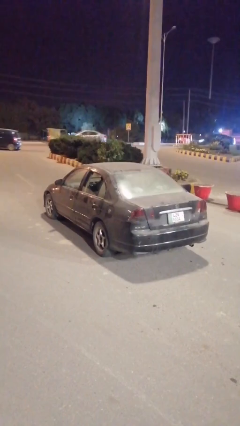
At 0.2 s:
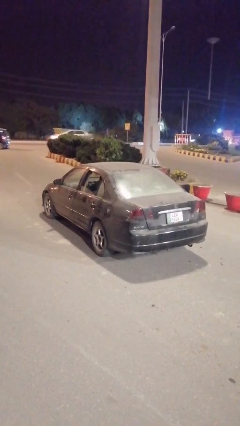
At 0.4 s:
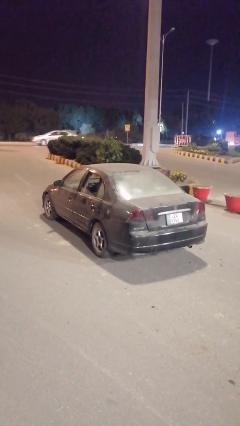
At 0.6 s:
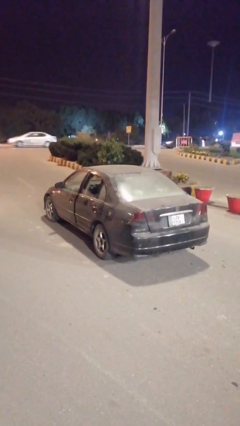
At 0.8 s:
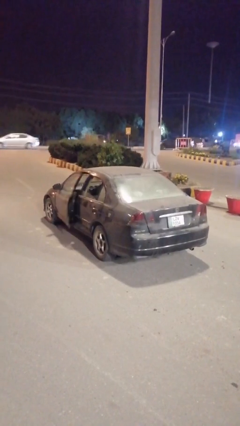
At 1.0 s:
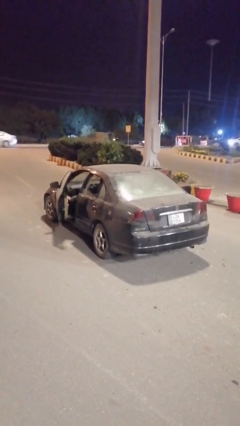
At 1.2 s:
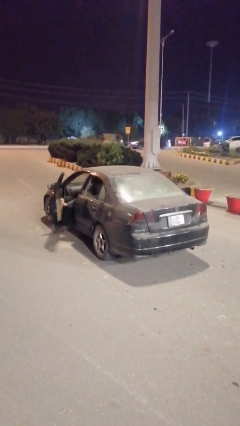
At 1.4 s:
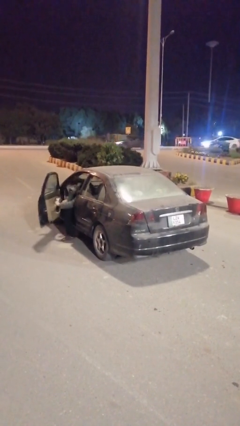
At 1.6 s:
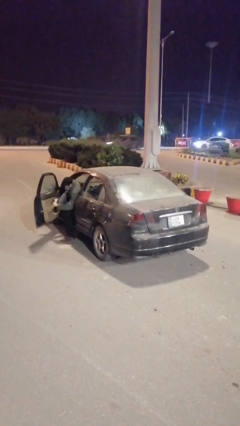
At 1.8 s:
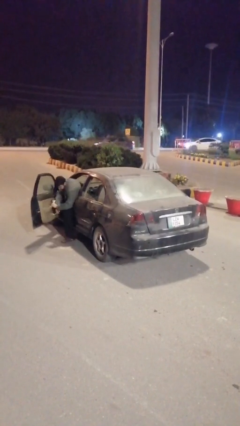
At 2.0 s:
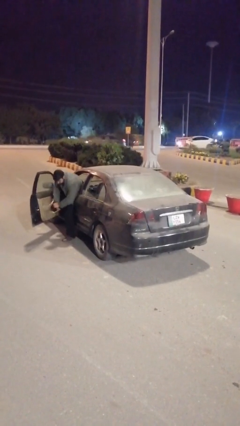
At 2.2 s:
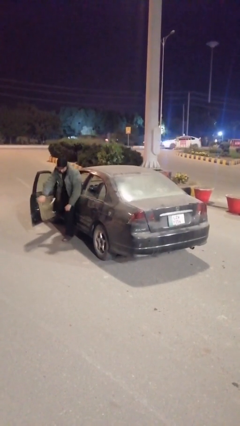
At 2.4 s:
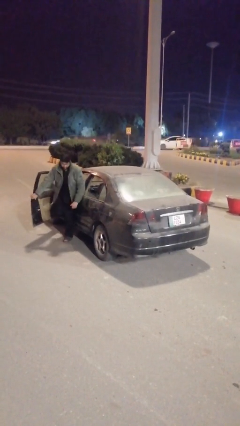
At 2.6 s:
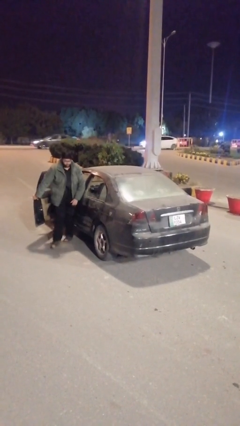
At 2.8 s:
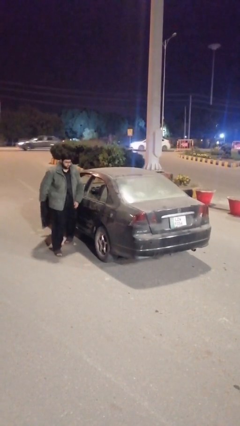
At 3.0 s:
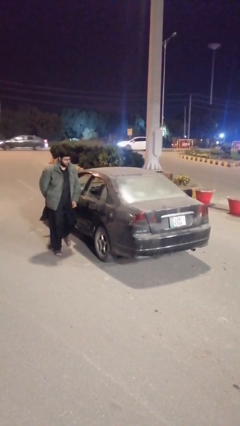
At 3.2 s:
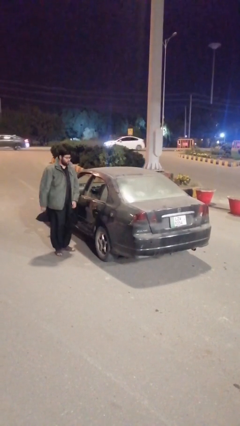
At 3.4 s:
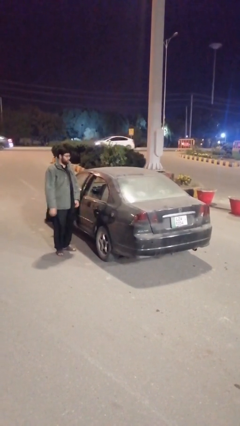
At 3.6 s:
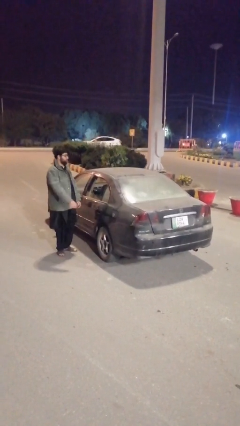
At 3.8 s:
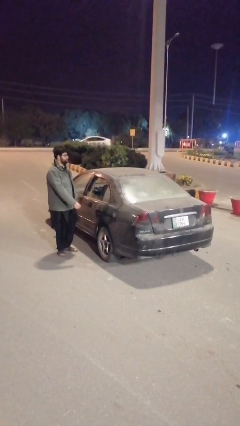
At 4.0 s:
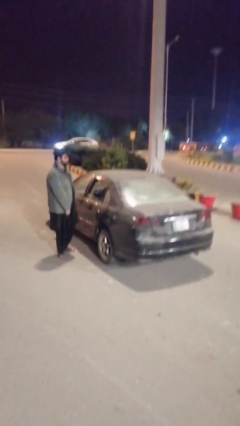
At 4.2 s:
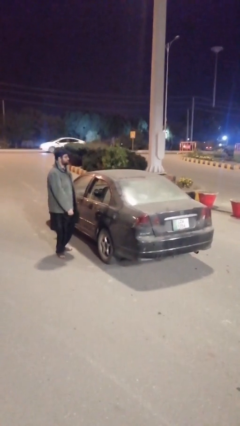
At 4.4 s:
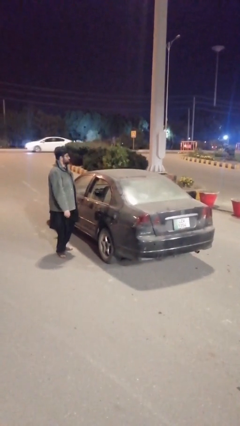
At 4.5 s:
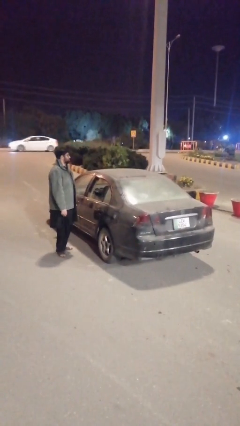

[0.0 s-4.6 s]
car drops off person

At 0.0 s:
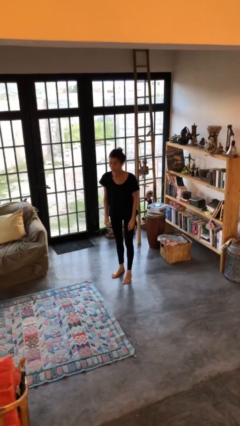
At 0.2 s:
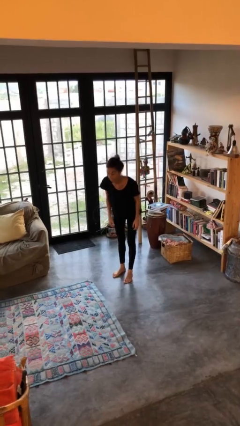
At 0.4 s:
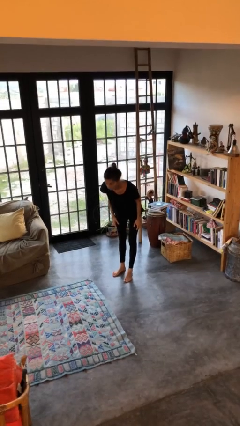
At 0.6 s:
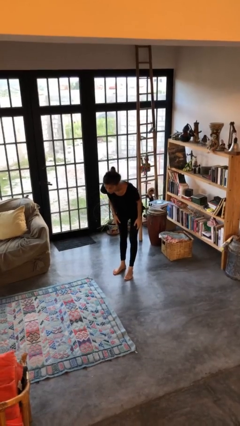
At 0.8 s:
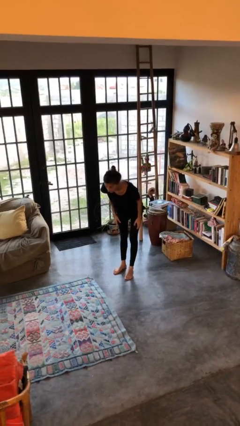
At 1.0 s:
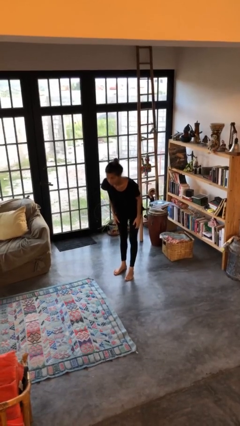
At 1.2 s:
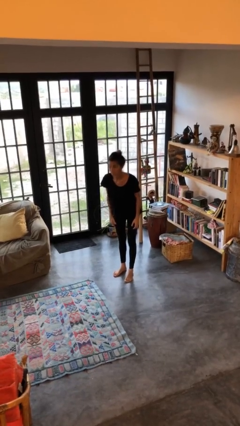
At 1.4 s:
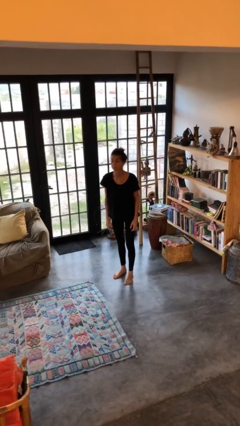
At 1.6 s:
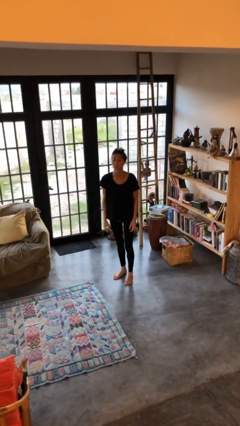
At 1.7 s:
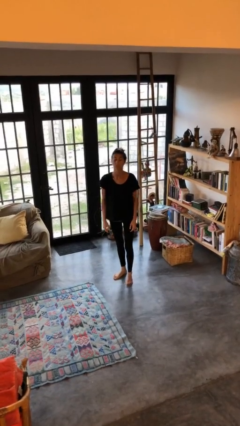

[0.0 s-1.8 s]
person bows

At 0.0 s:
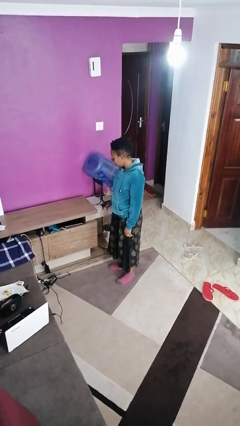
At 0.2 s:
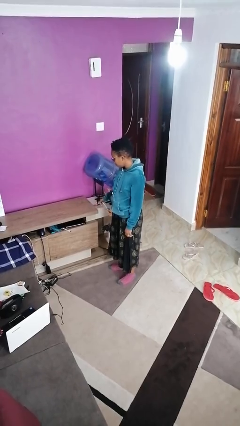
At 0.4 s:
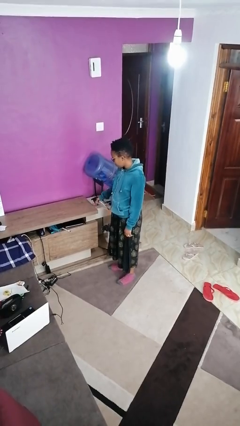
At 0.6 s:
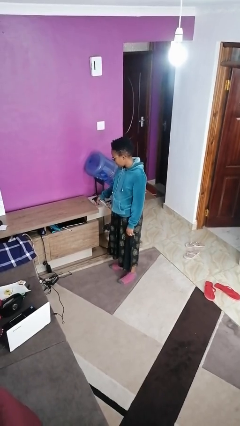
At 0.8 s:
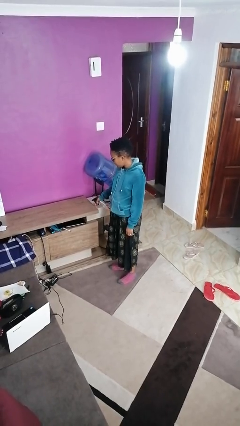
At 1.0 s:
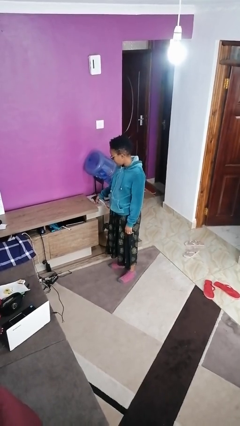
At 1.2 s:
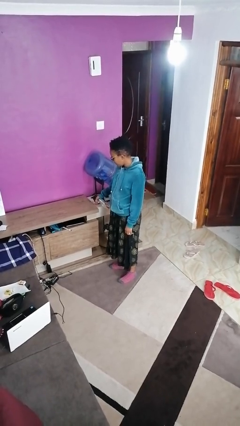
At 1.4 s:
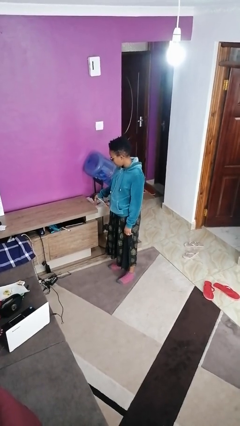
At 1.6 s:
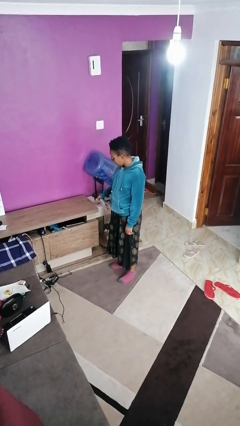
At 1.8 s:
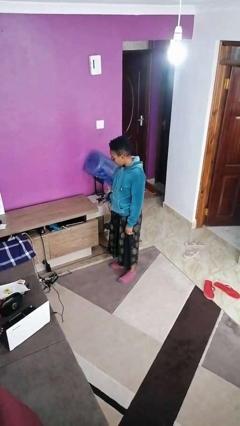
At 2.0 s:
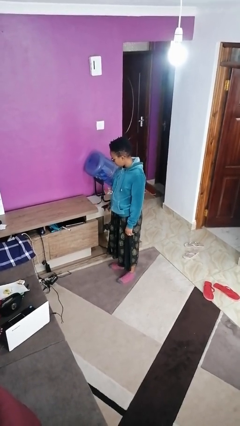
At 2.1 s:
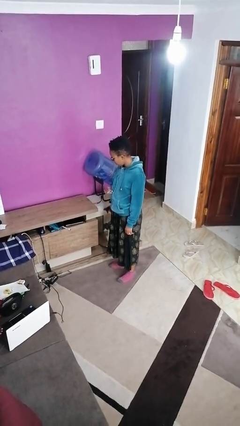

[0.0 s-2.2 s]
person sprays from bottle

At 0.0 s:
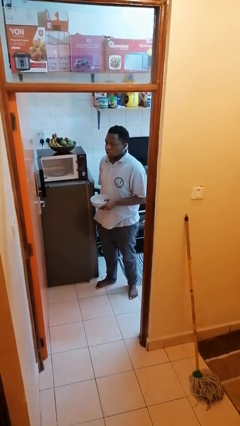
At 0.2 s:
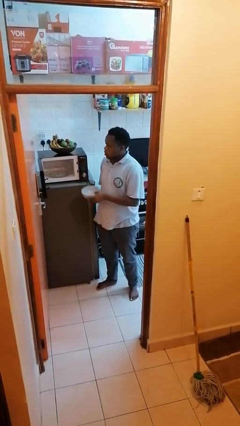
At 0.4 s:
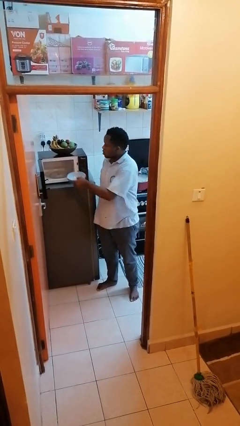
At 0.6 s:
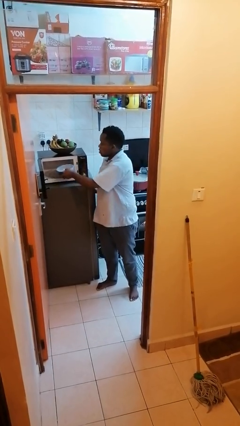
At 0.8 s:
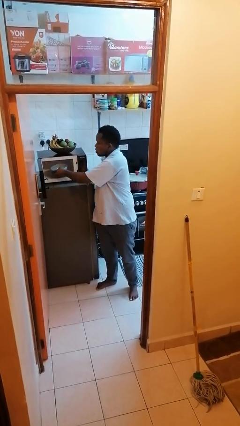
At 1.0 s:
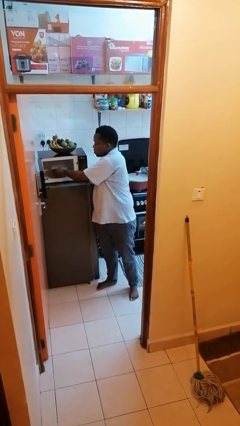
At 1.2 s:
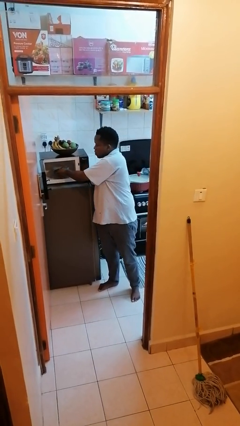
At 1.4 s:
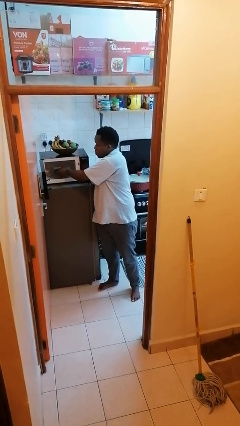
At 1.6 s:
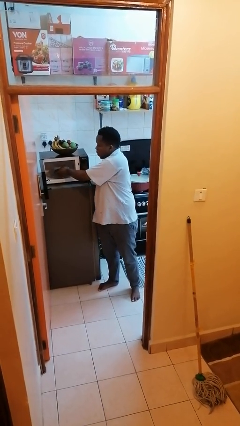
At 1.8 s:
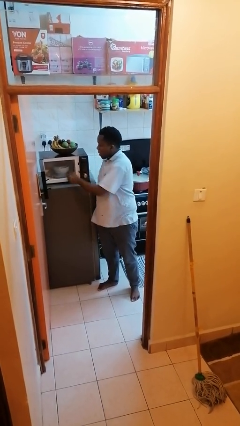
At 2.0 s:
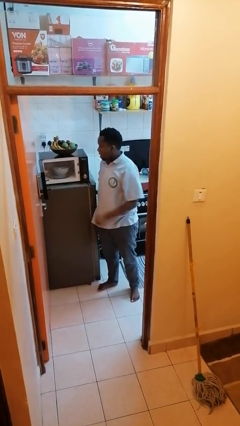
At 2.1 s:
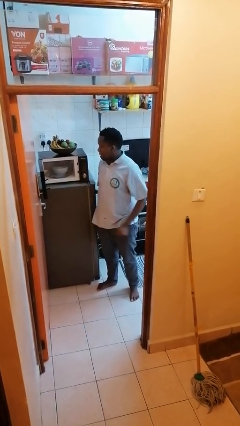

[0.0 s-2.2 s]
person puts object into microwave

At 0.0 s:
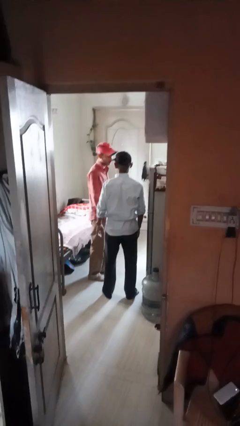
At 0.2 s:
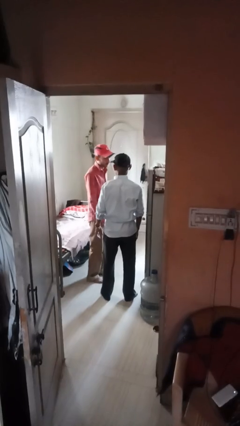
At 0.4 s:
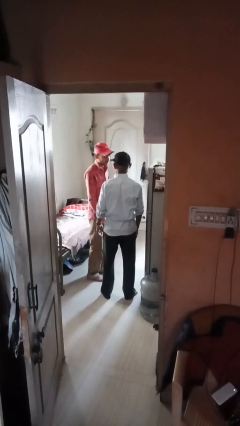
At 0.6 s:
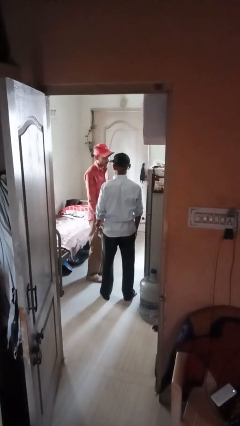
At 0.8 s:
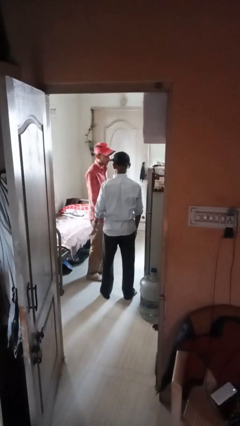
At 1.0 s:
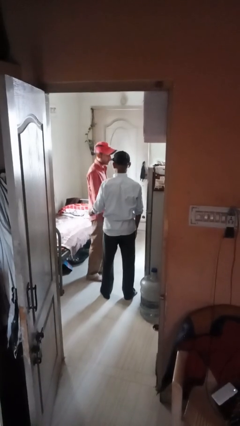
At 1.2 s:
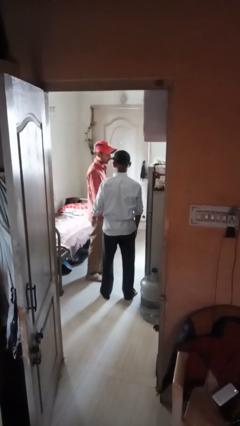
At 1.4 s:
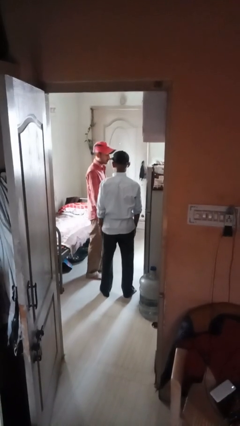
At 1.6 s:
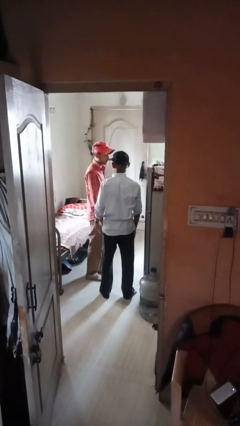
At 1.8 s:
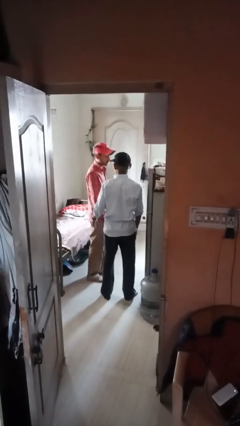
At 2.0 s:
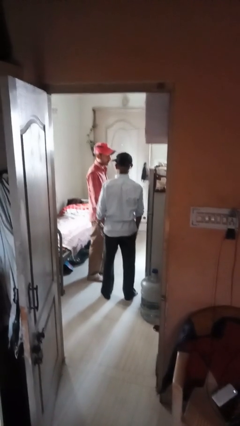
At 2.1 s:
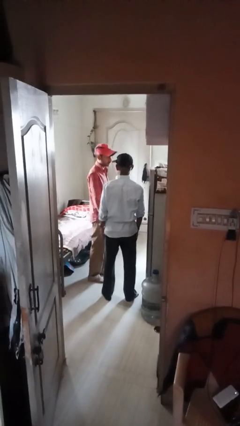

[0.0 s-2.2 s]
person grabs person by shoulder

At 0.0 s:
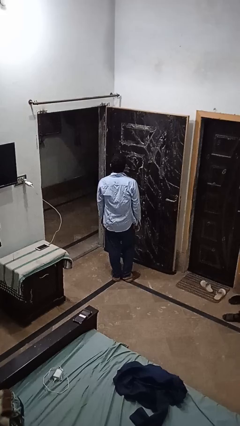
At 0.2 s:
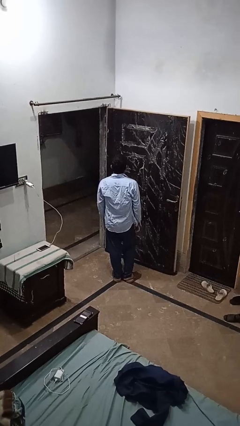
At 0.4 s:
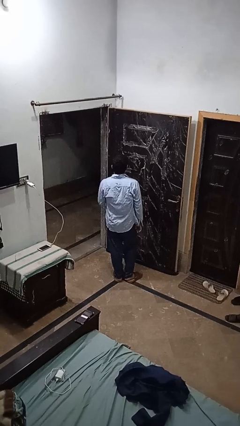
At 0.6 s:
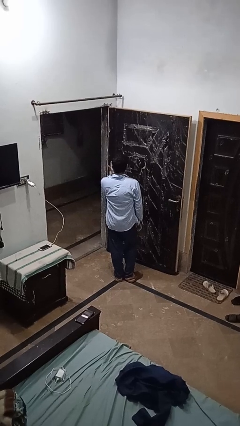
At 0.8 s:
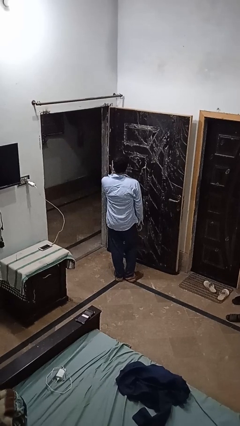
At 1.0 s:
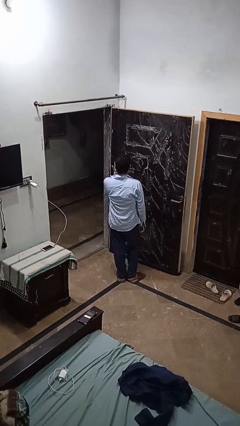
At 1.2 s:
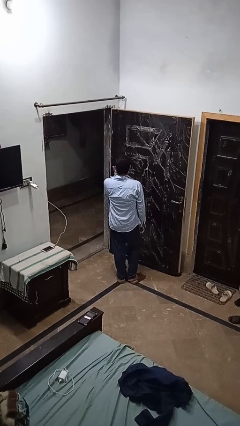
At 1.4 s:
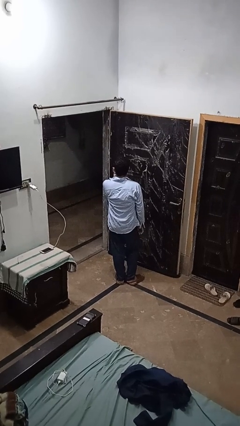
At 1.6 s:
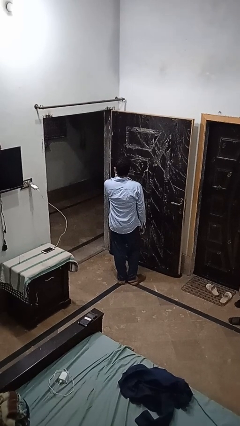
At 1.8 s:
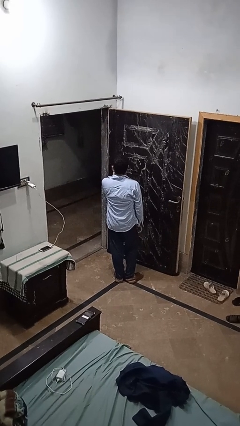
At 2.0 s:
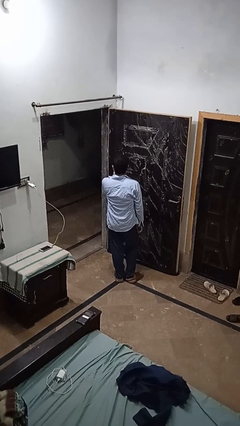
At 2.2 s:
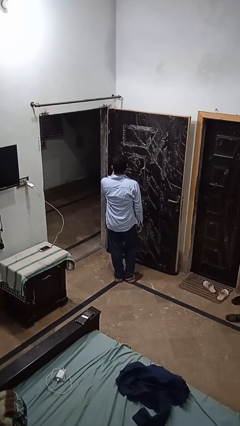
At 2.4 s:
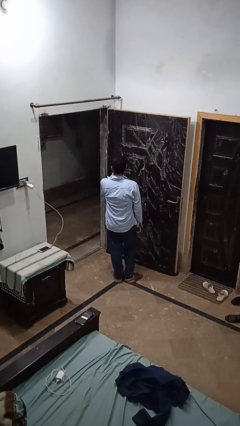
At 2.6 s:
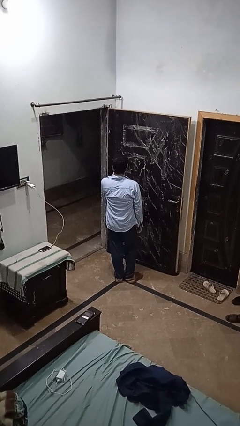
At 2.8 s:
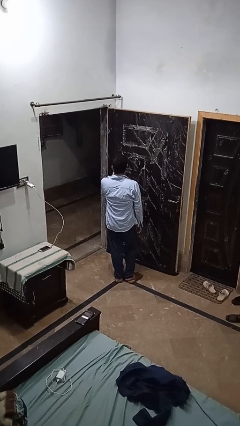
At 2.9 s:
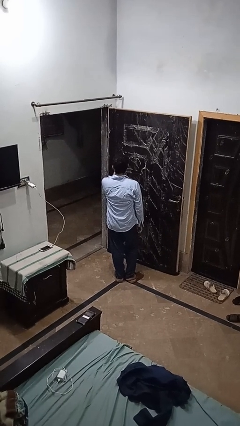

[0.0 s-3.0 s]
person licks fingers

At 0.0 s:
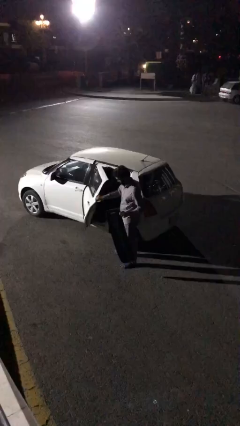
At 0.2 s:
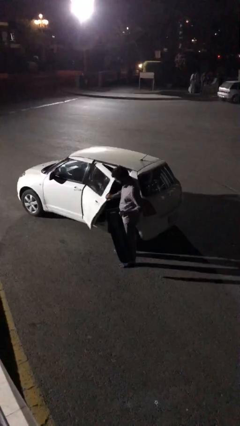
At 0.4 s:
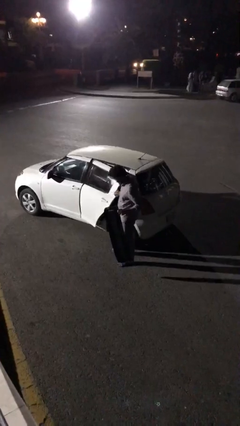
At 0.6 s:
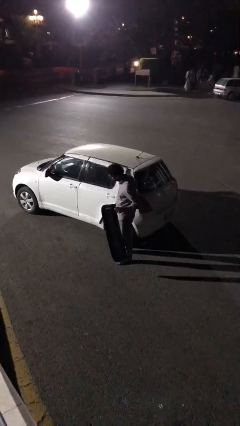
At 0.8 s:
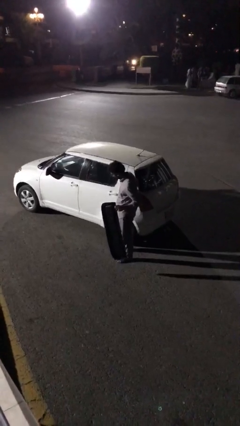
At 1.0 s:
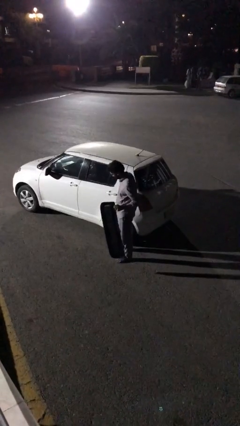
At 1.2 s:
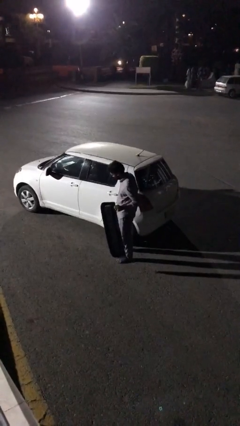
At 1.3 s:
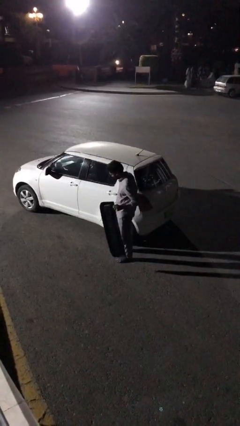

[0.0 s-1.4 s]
person closes car door
